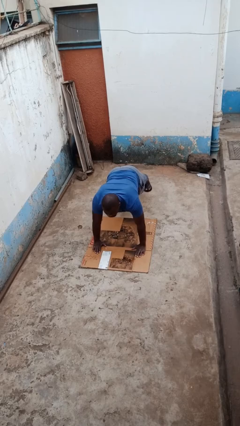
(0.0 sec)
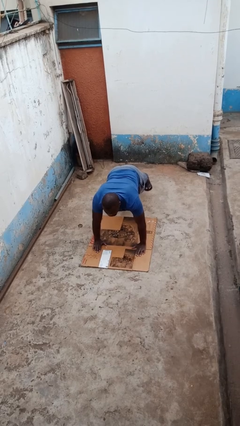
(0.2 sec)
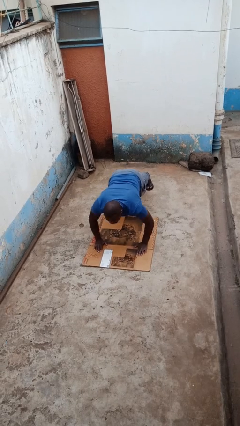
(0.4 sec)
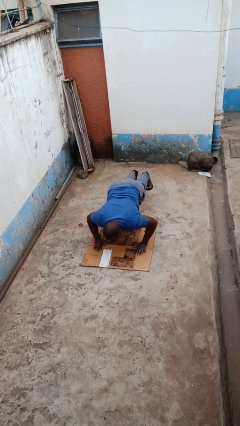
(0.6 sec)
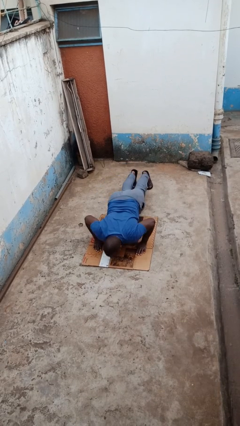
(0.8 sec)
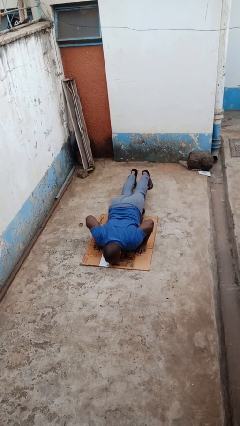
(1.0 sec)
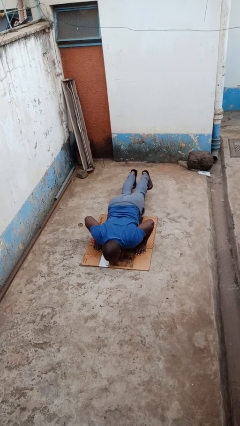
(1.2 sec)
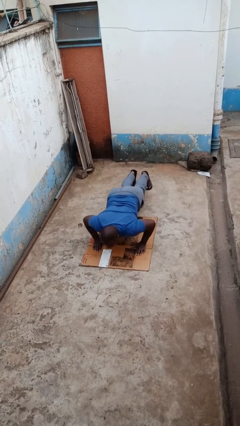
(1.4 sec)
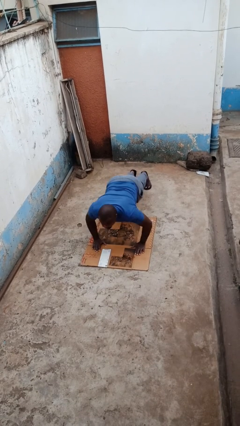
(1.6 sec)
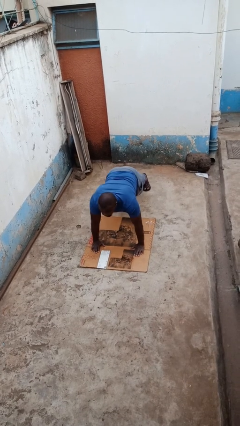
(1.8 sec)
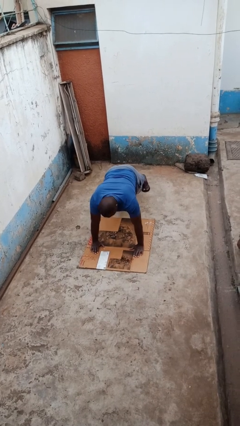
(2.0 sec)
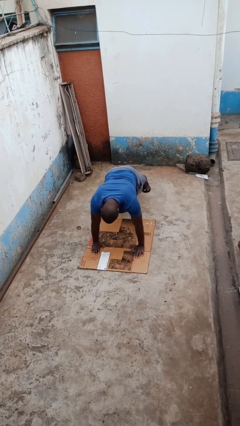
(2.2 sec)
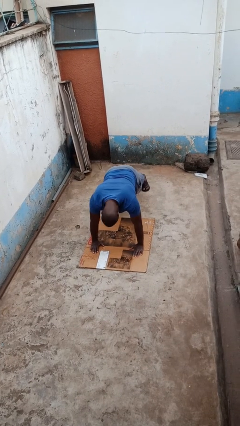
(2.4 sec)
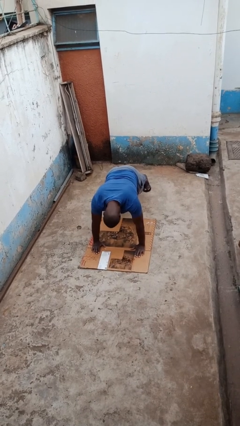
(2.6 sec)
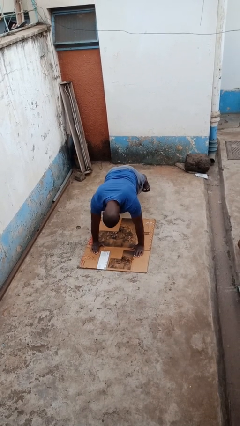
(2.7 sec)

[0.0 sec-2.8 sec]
person exercises with pushup

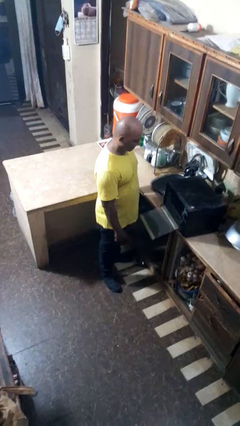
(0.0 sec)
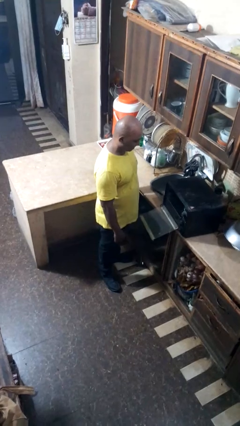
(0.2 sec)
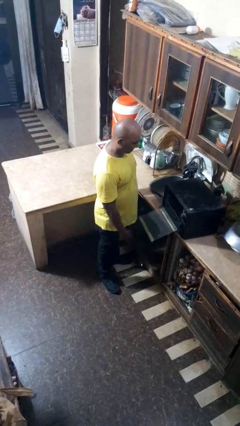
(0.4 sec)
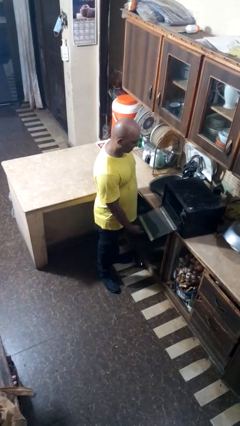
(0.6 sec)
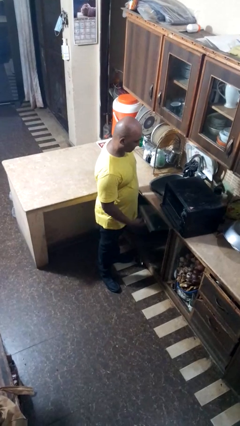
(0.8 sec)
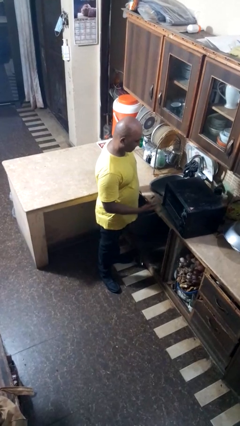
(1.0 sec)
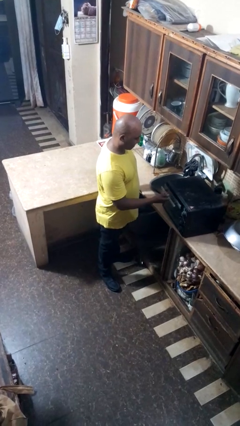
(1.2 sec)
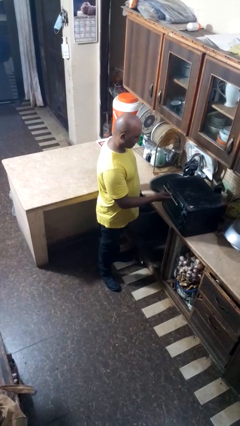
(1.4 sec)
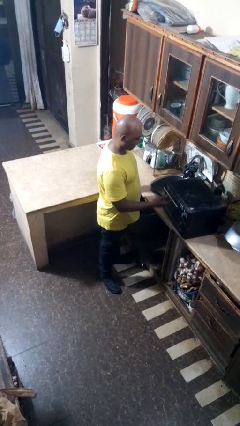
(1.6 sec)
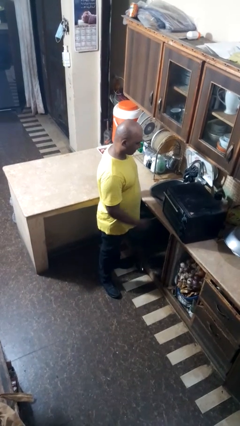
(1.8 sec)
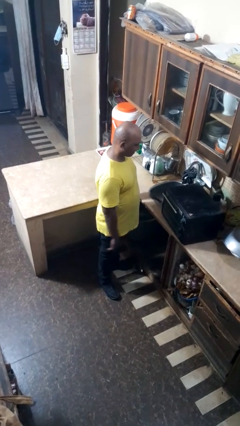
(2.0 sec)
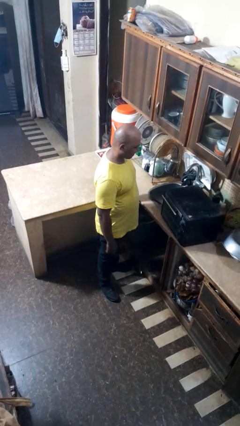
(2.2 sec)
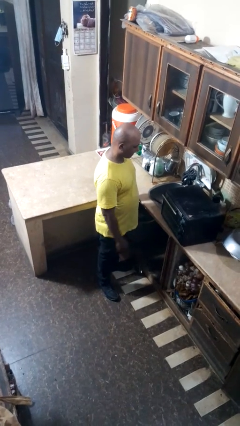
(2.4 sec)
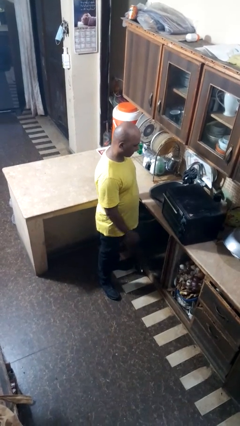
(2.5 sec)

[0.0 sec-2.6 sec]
person closes oven door

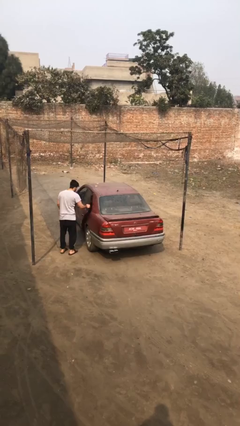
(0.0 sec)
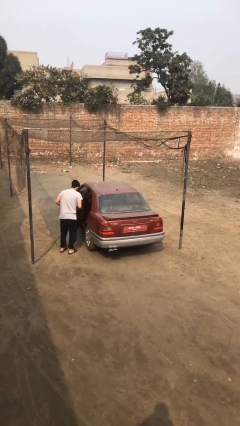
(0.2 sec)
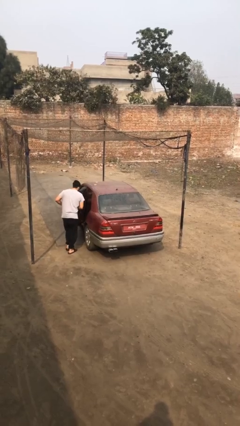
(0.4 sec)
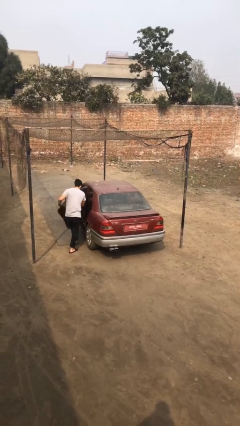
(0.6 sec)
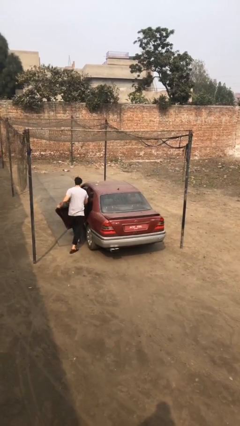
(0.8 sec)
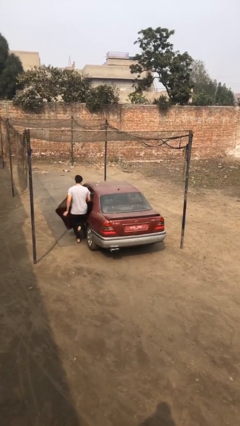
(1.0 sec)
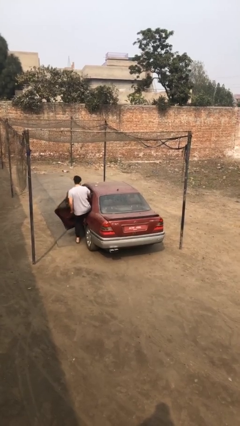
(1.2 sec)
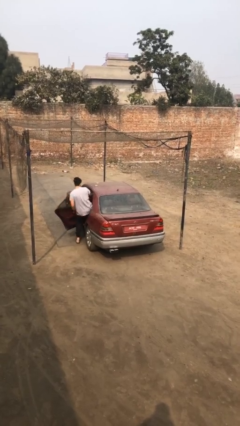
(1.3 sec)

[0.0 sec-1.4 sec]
car picks up person

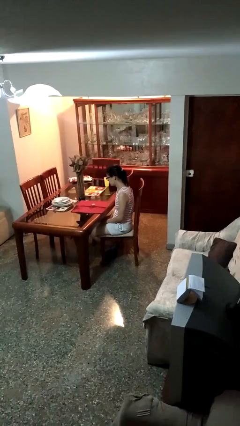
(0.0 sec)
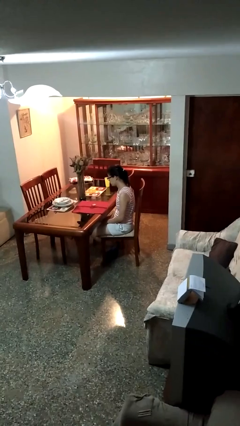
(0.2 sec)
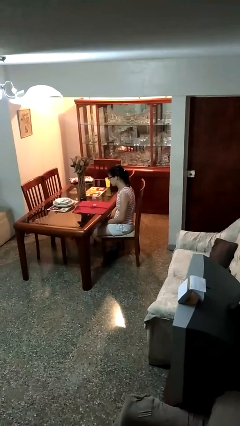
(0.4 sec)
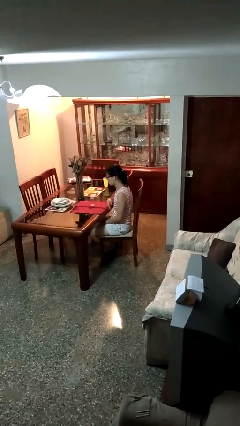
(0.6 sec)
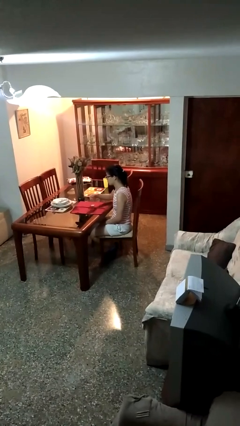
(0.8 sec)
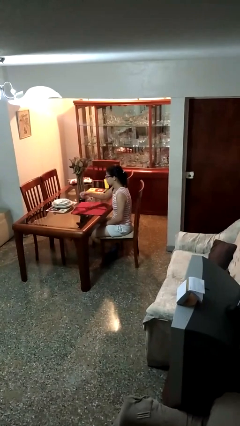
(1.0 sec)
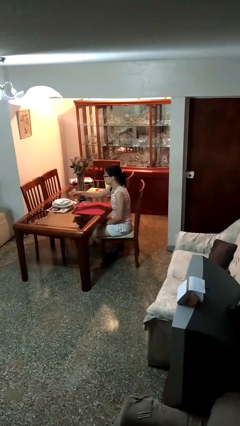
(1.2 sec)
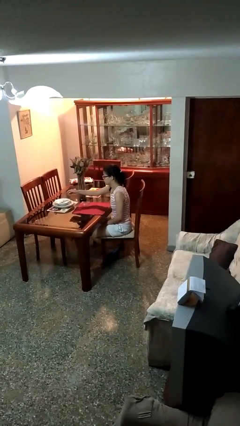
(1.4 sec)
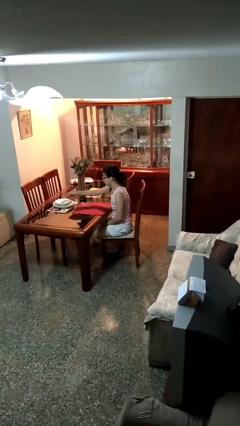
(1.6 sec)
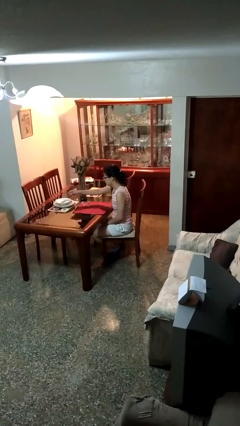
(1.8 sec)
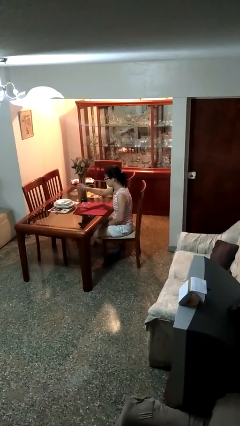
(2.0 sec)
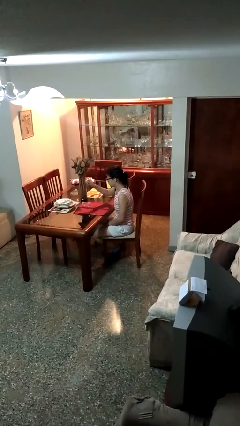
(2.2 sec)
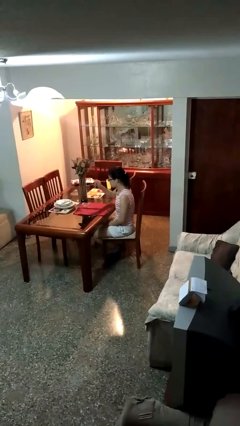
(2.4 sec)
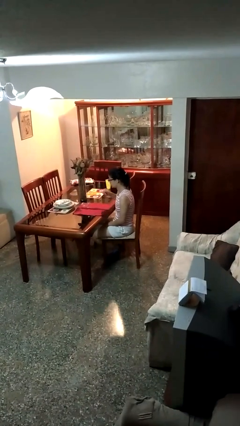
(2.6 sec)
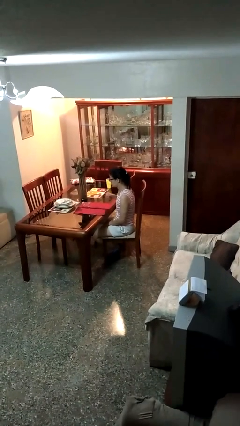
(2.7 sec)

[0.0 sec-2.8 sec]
person knocks over glass

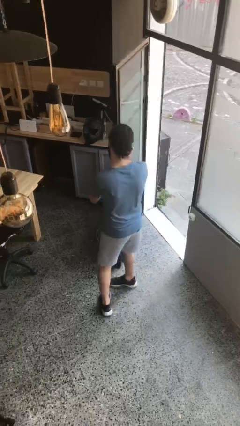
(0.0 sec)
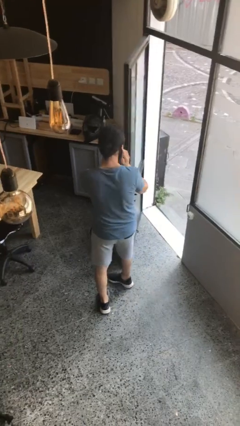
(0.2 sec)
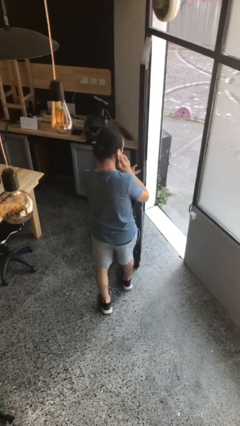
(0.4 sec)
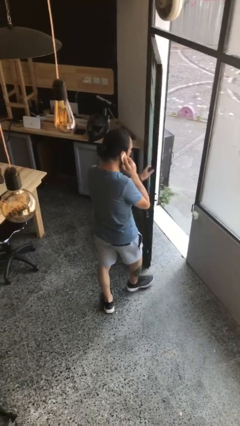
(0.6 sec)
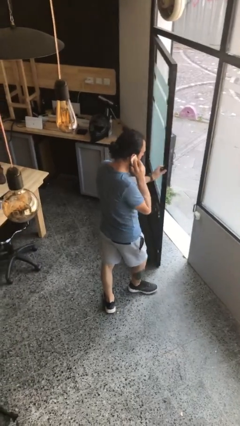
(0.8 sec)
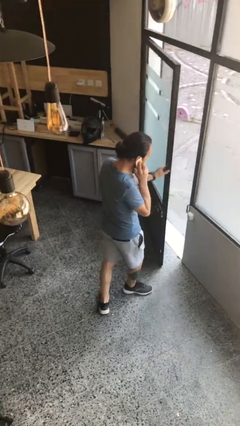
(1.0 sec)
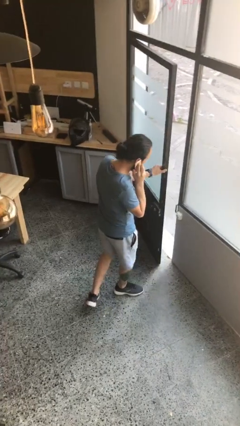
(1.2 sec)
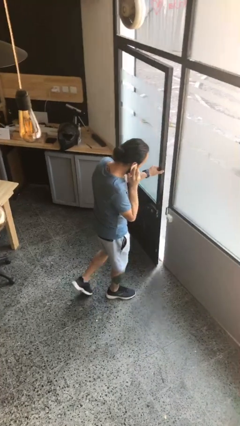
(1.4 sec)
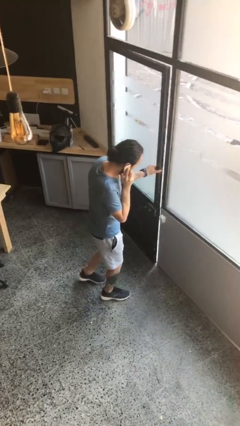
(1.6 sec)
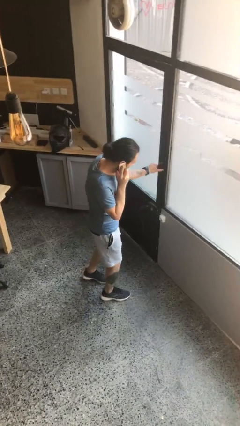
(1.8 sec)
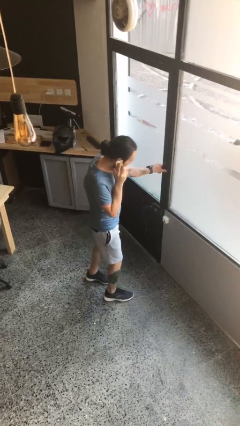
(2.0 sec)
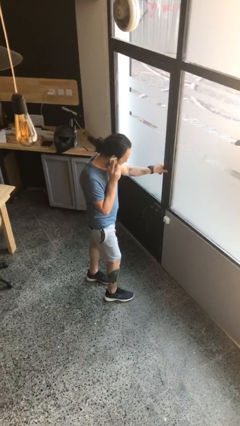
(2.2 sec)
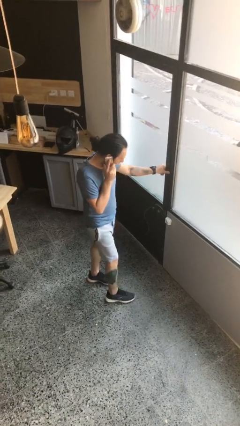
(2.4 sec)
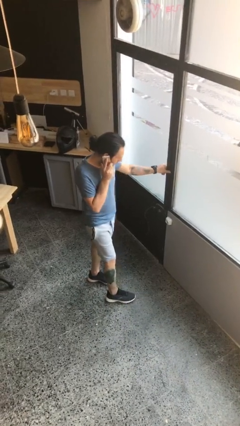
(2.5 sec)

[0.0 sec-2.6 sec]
person closes facility door

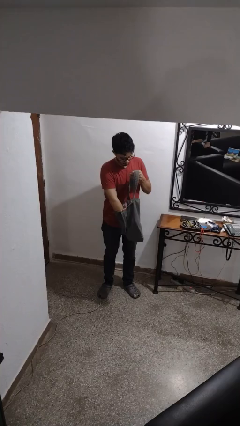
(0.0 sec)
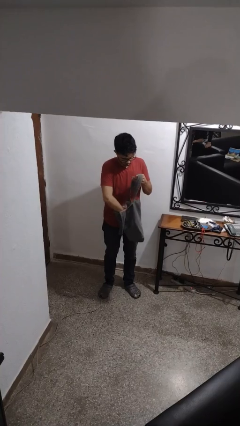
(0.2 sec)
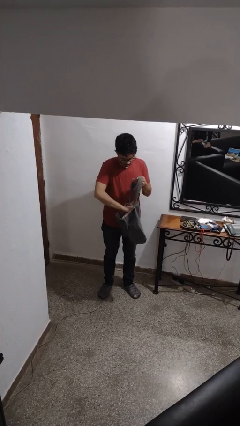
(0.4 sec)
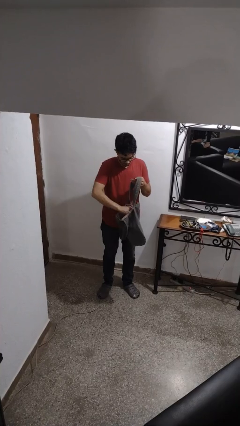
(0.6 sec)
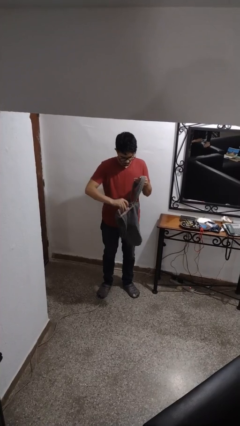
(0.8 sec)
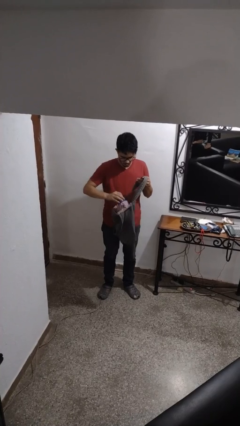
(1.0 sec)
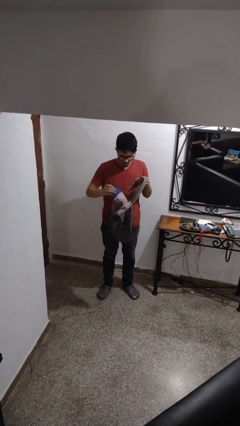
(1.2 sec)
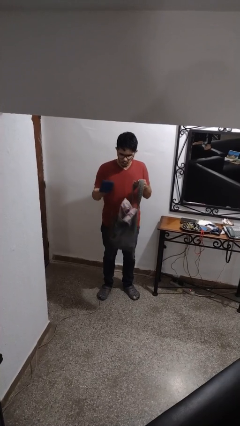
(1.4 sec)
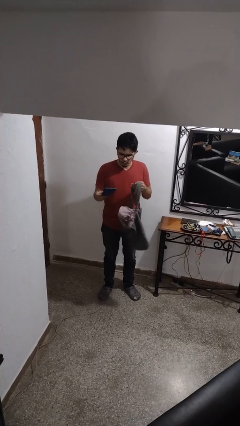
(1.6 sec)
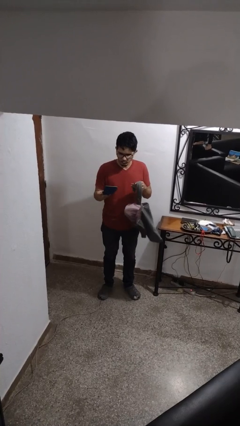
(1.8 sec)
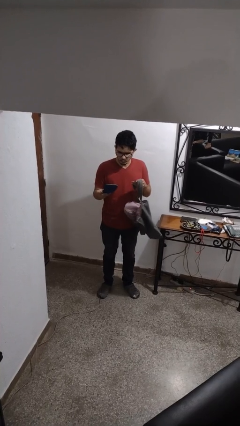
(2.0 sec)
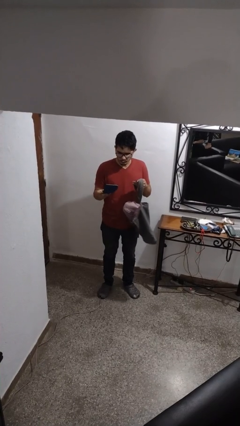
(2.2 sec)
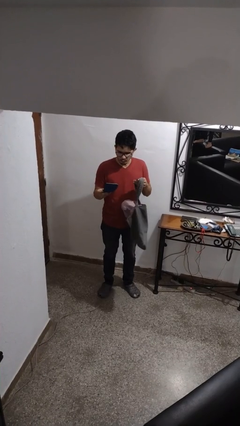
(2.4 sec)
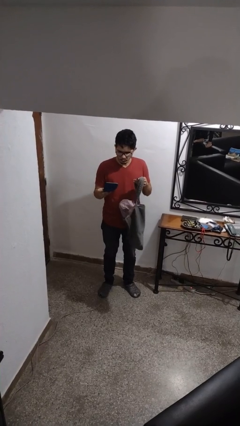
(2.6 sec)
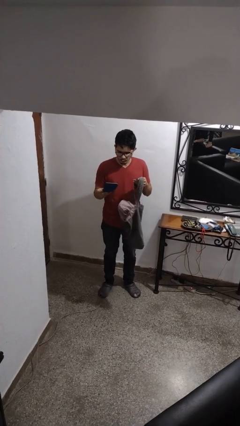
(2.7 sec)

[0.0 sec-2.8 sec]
person takes object from purse

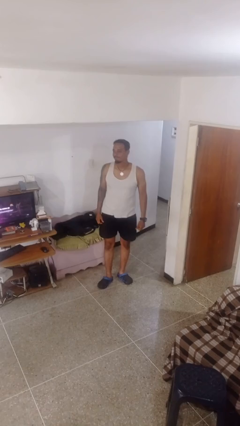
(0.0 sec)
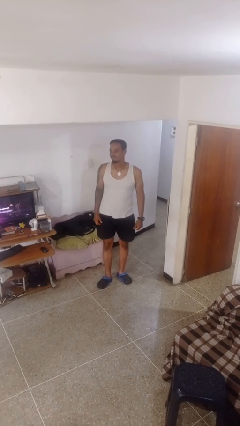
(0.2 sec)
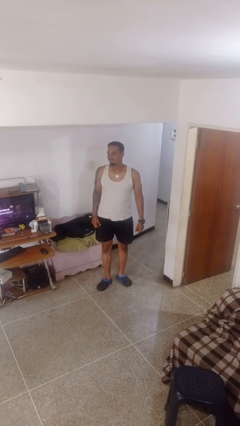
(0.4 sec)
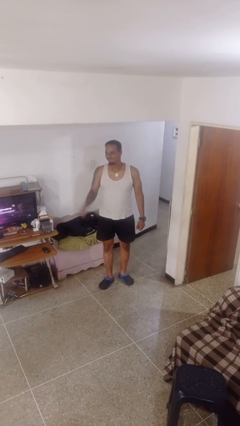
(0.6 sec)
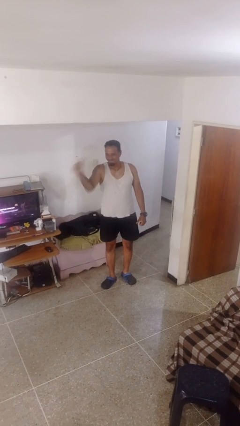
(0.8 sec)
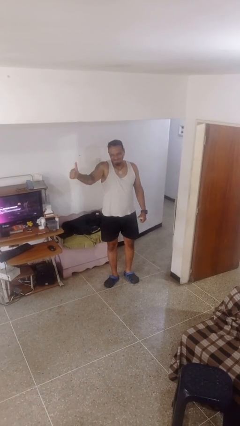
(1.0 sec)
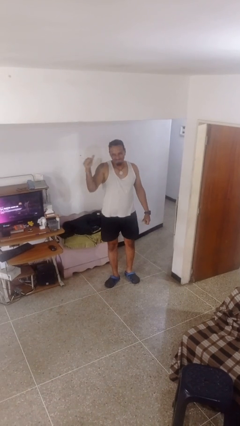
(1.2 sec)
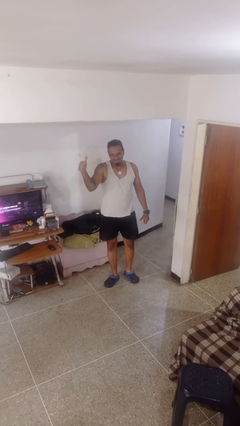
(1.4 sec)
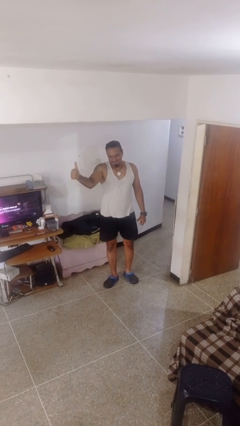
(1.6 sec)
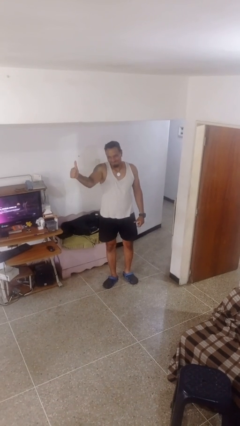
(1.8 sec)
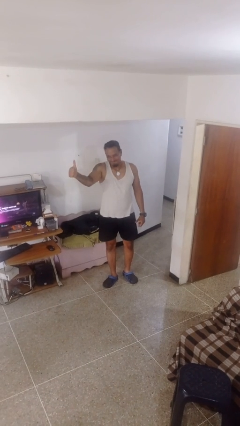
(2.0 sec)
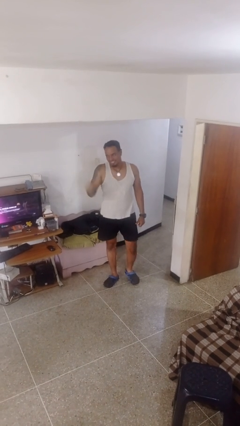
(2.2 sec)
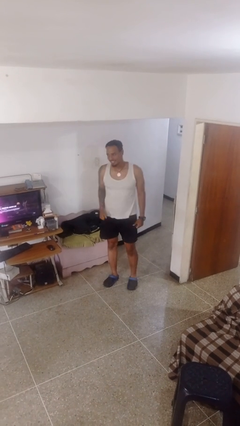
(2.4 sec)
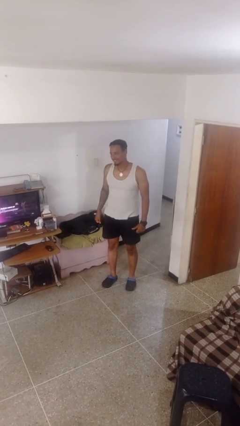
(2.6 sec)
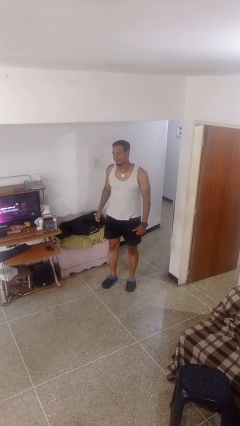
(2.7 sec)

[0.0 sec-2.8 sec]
person gestures thumbs up
